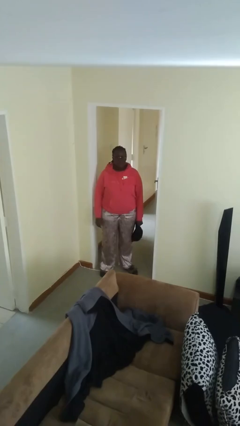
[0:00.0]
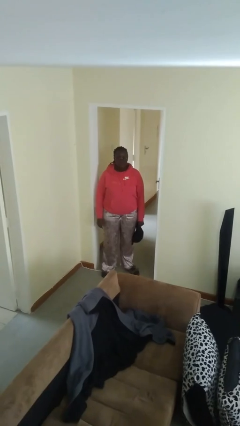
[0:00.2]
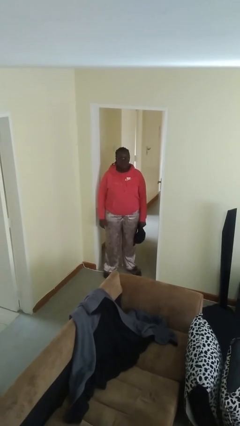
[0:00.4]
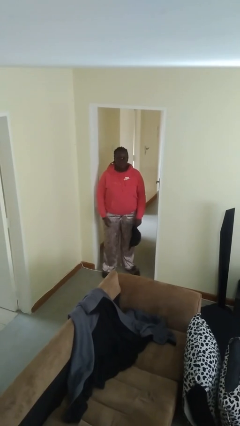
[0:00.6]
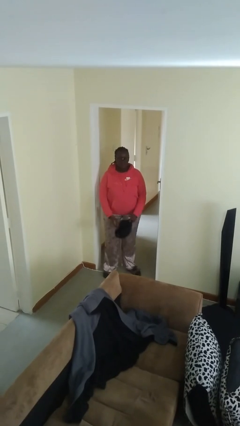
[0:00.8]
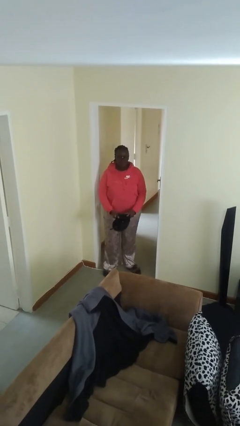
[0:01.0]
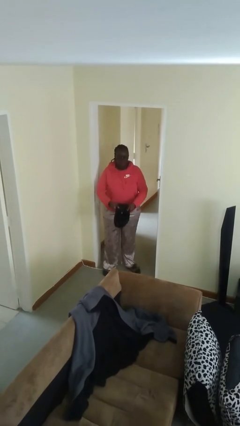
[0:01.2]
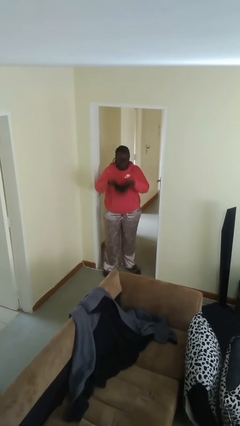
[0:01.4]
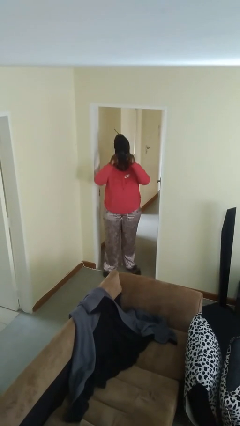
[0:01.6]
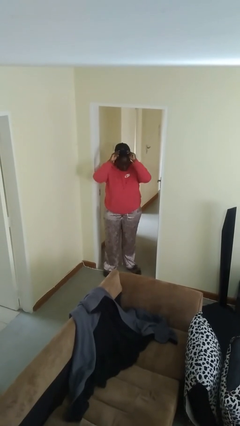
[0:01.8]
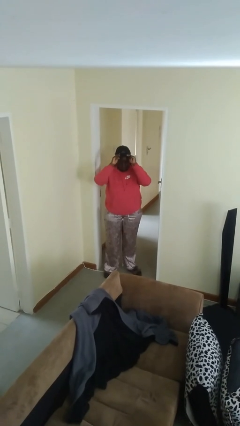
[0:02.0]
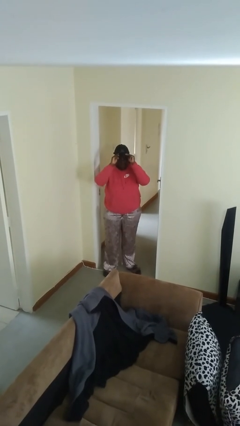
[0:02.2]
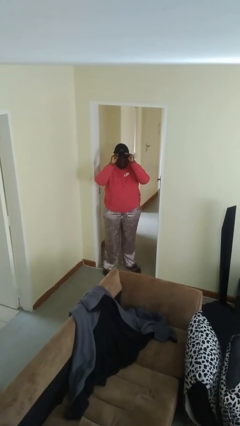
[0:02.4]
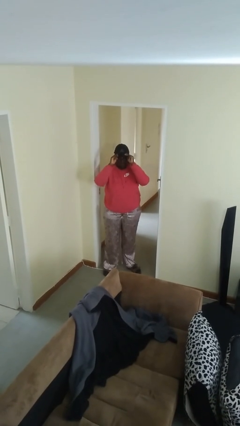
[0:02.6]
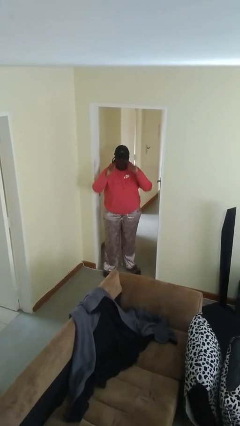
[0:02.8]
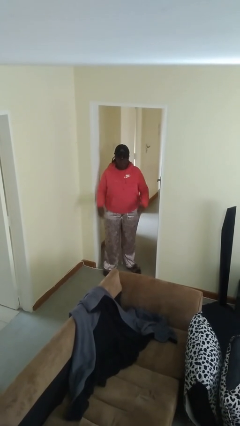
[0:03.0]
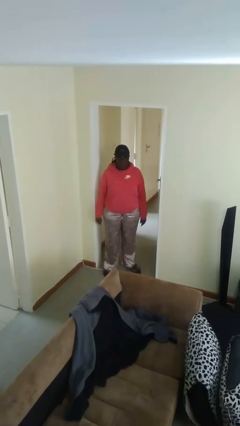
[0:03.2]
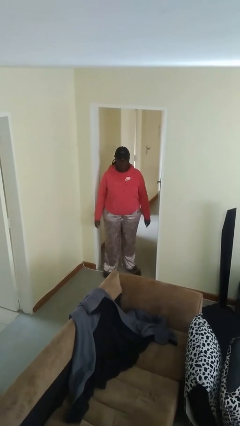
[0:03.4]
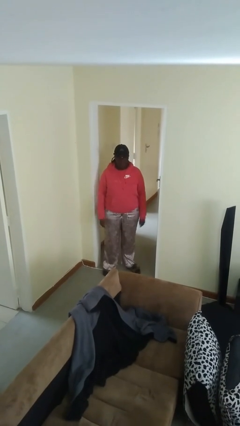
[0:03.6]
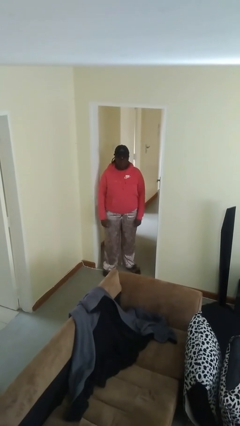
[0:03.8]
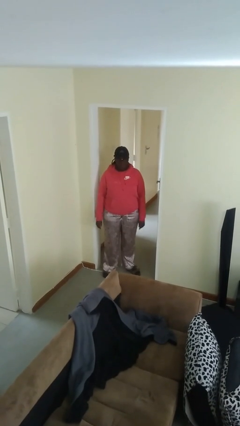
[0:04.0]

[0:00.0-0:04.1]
person puts on hat

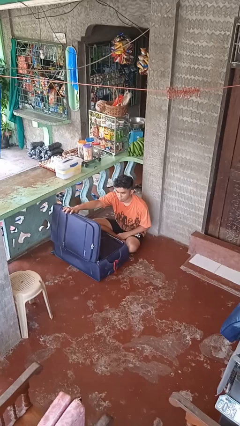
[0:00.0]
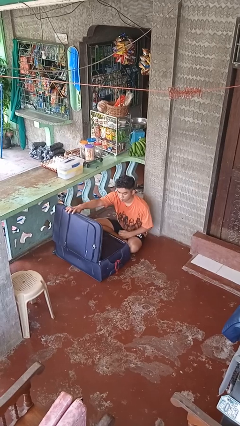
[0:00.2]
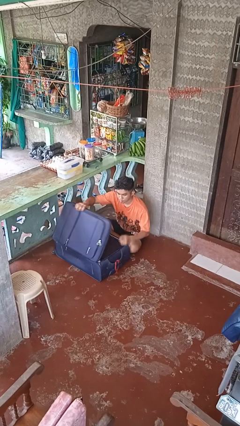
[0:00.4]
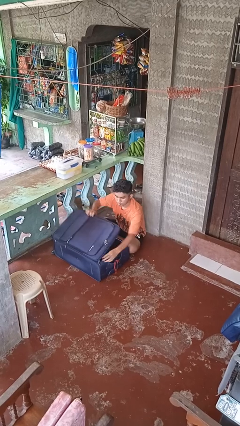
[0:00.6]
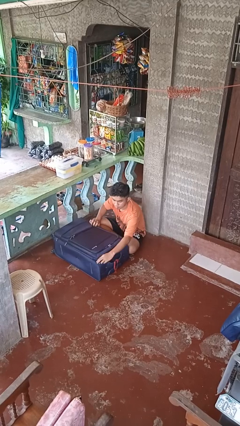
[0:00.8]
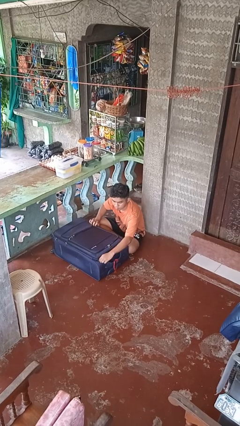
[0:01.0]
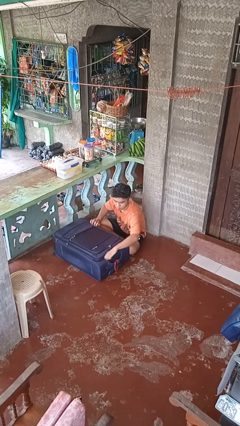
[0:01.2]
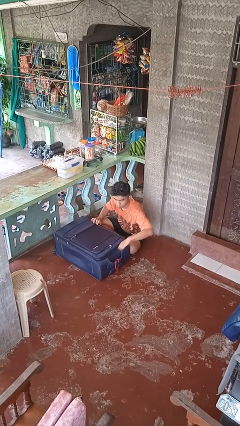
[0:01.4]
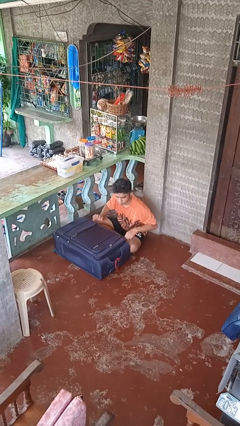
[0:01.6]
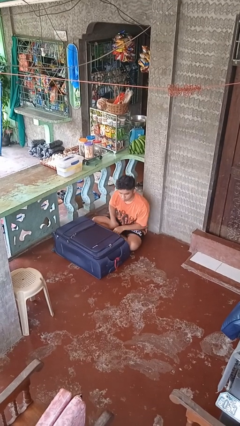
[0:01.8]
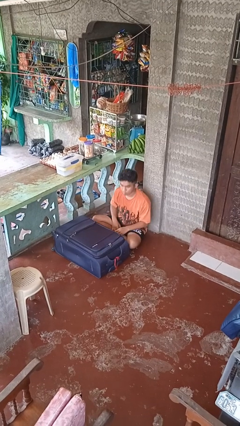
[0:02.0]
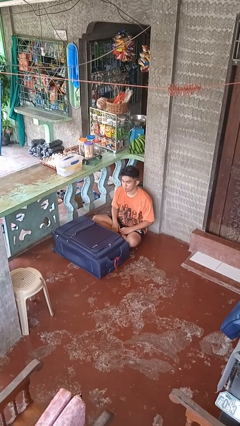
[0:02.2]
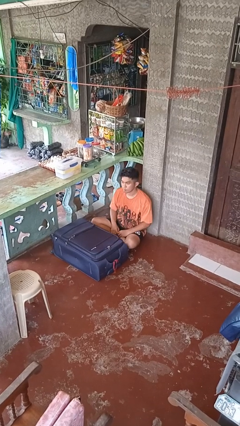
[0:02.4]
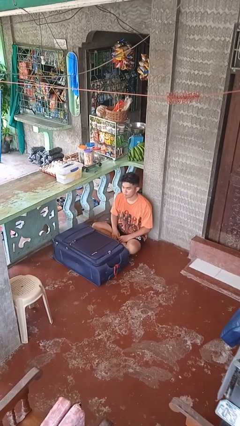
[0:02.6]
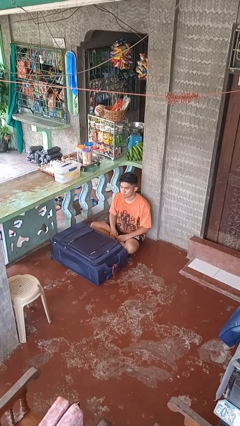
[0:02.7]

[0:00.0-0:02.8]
person closes suitcase

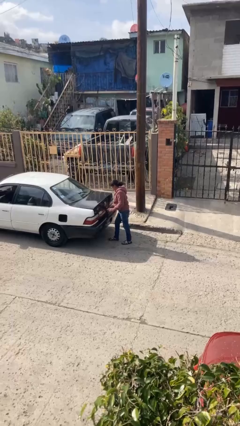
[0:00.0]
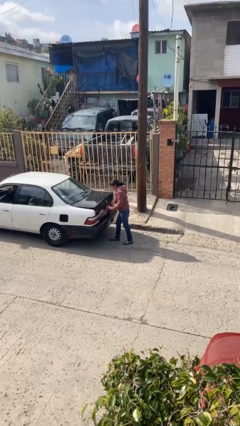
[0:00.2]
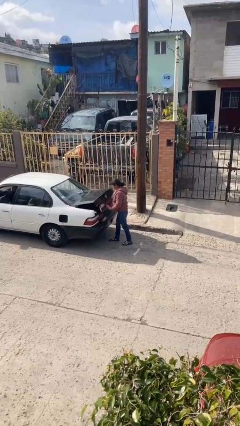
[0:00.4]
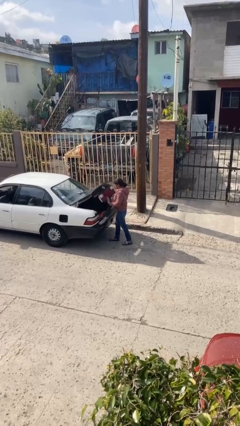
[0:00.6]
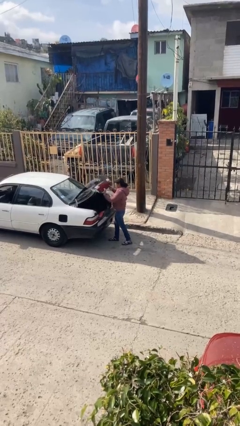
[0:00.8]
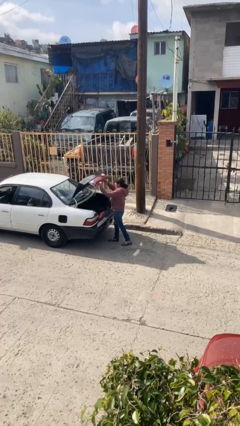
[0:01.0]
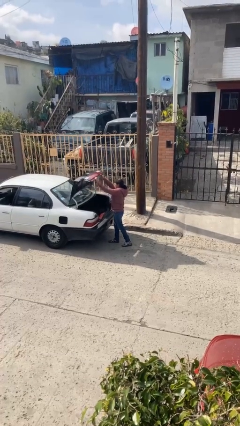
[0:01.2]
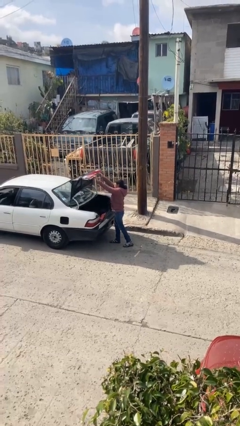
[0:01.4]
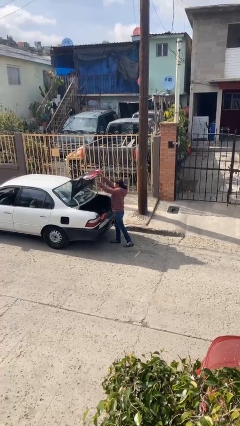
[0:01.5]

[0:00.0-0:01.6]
person opens car trunk

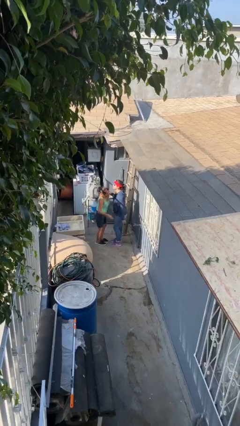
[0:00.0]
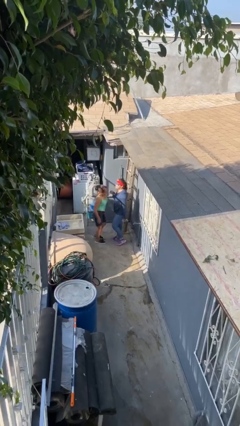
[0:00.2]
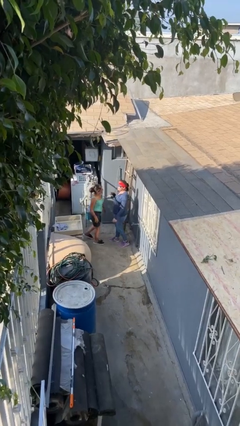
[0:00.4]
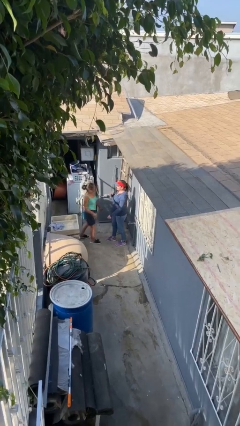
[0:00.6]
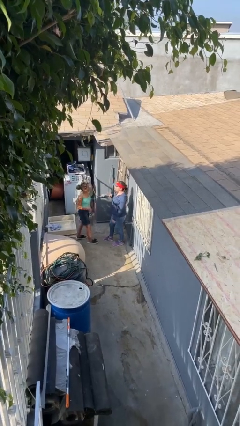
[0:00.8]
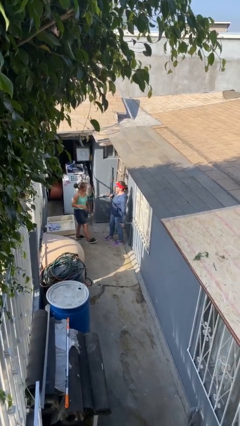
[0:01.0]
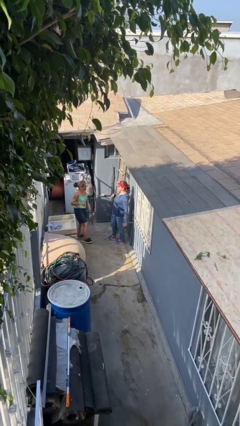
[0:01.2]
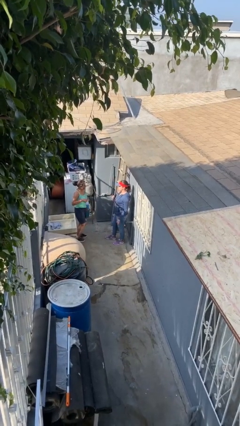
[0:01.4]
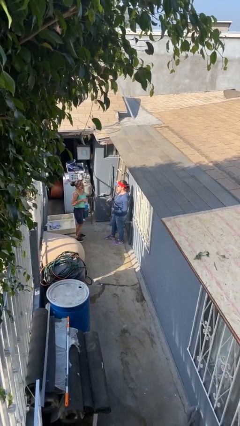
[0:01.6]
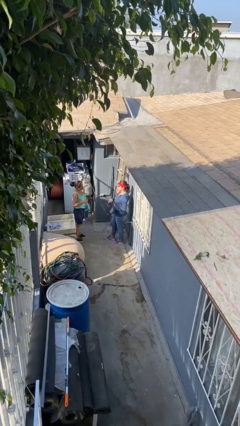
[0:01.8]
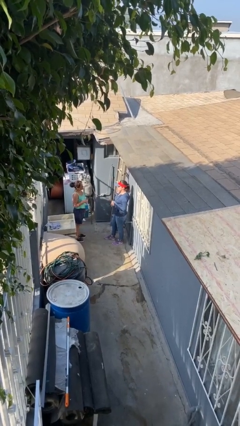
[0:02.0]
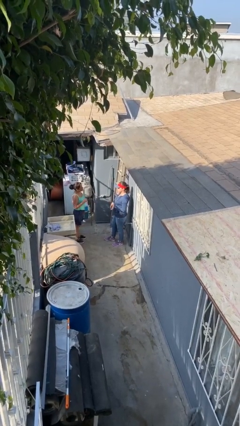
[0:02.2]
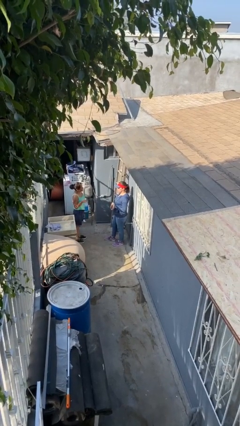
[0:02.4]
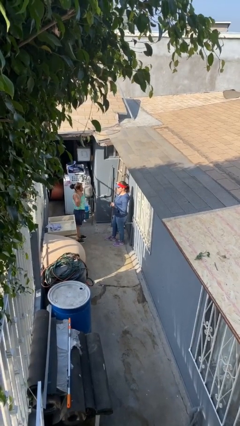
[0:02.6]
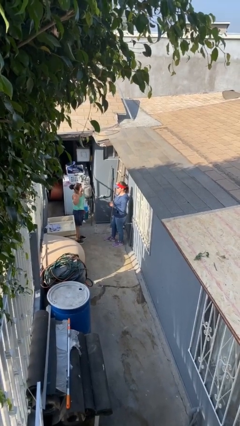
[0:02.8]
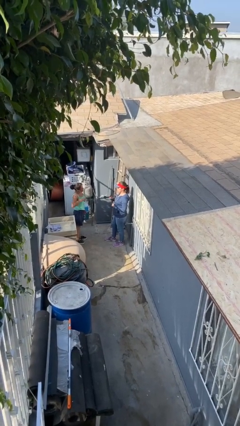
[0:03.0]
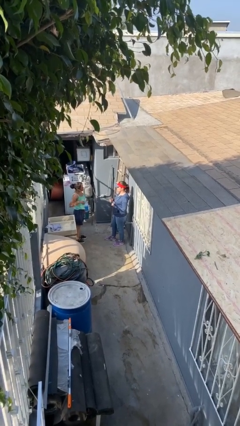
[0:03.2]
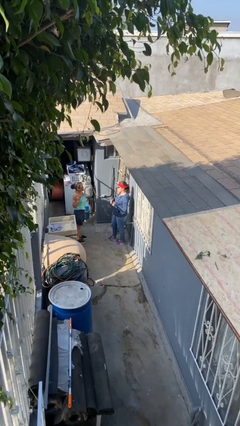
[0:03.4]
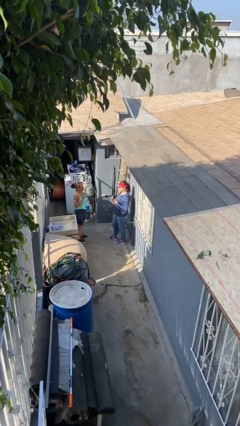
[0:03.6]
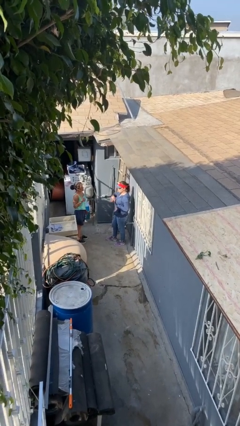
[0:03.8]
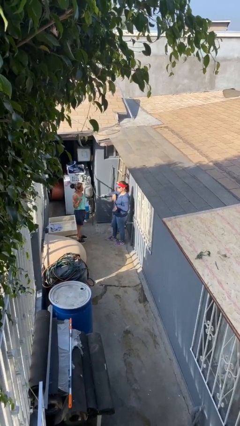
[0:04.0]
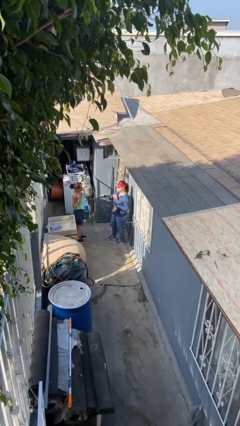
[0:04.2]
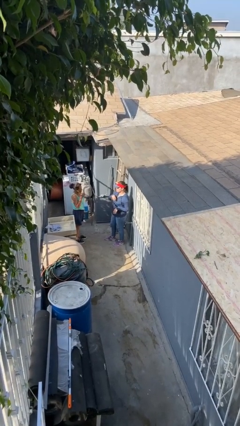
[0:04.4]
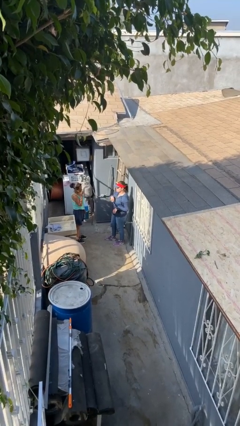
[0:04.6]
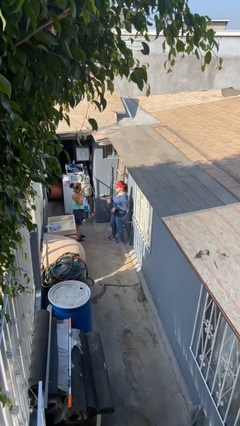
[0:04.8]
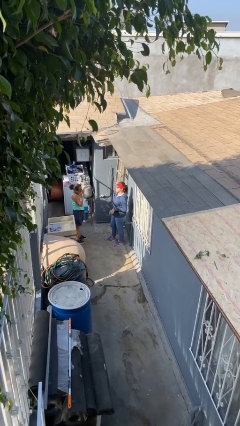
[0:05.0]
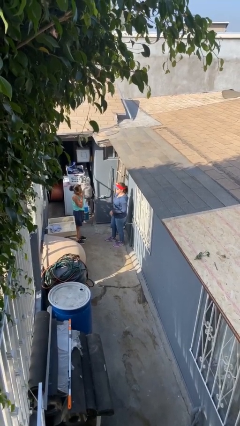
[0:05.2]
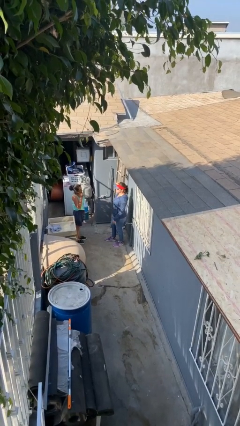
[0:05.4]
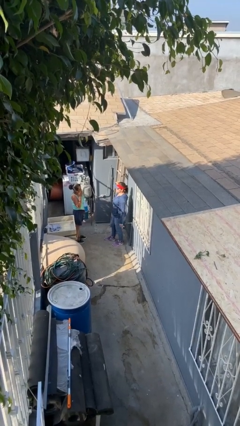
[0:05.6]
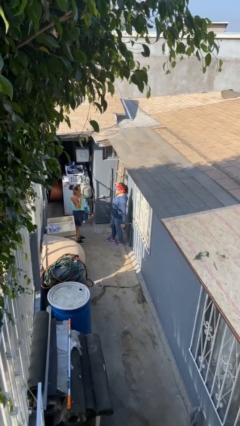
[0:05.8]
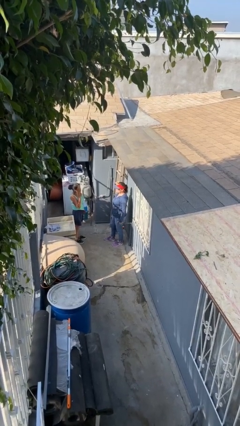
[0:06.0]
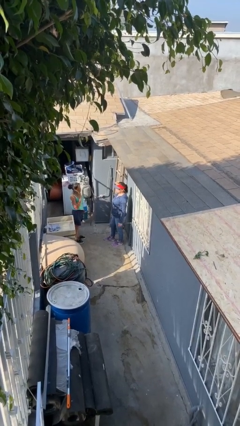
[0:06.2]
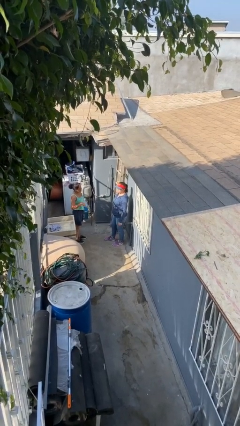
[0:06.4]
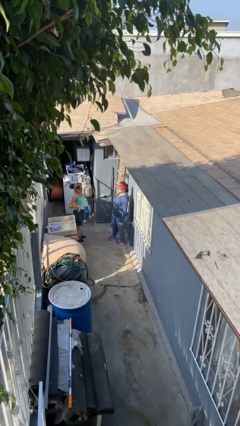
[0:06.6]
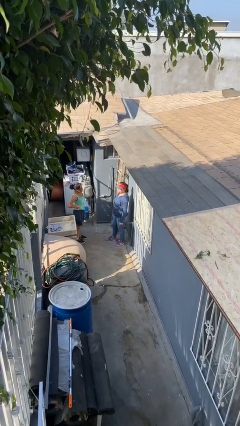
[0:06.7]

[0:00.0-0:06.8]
person talks to person

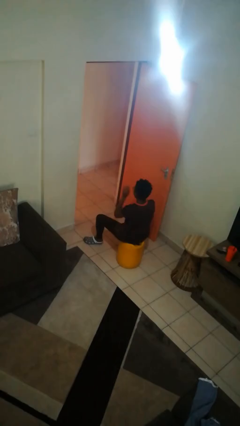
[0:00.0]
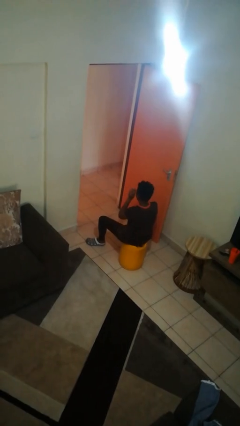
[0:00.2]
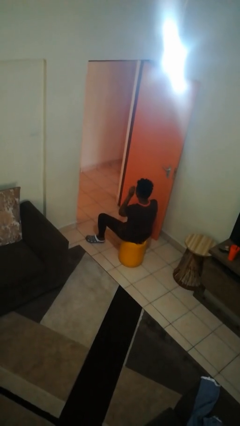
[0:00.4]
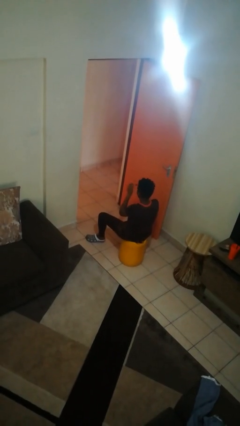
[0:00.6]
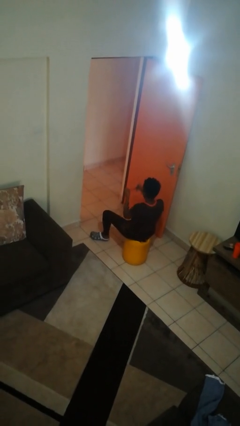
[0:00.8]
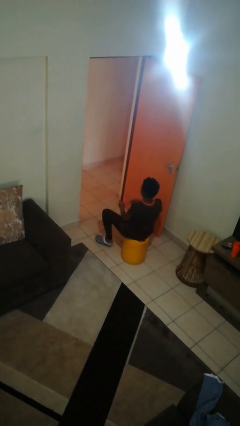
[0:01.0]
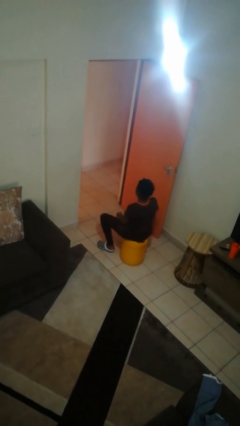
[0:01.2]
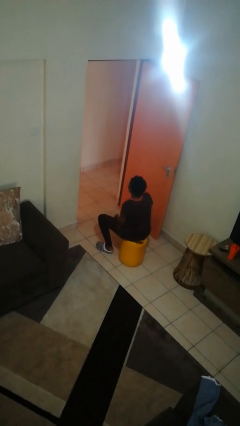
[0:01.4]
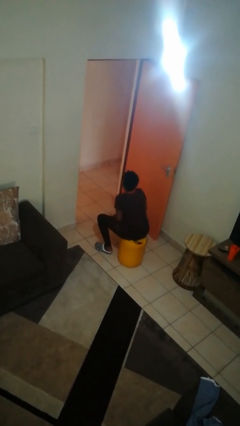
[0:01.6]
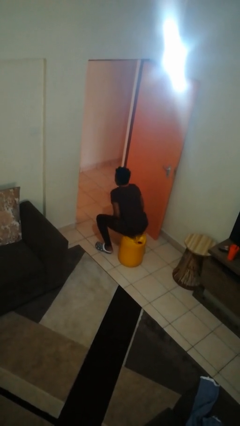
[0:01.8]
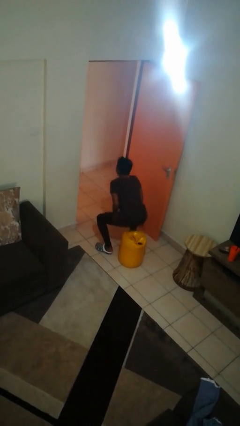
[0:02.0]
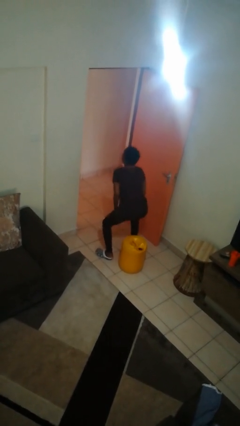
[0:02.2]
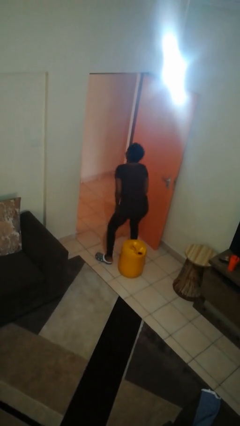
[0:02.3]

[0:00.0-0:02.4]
person takes off glasses
